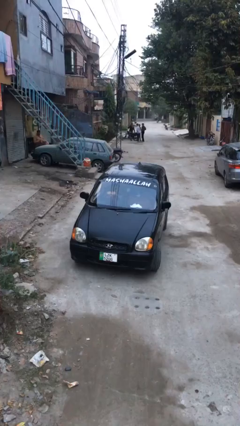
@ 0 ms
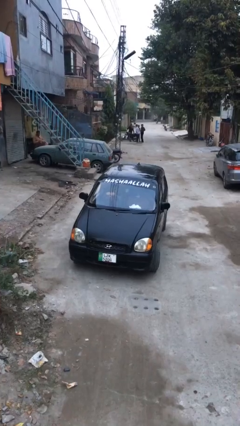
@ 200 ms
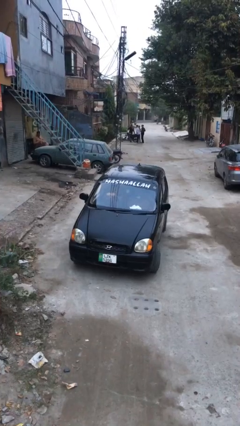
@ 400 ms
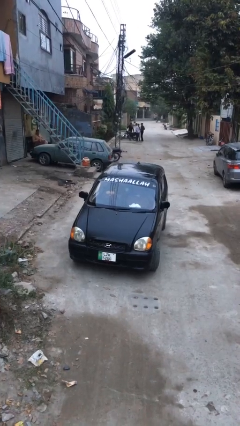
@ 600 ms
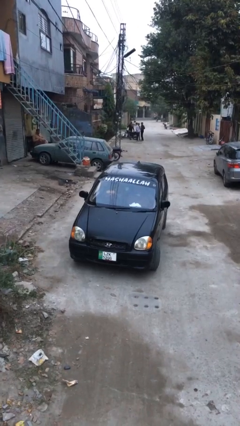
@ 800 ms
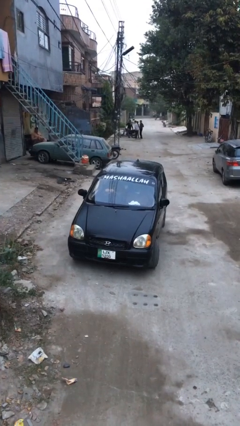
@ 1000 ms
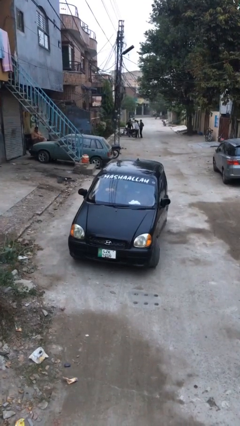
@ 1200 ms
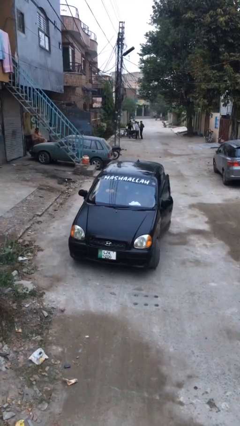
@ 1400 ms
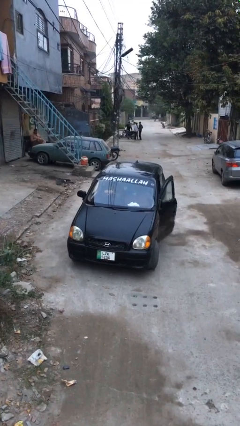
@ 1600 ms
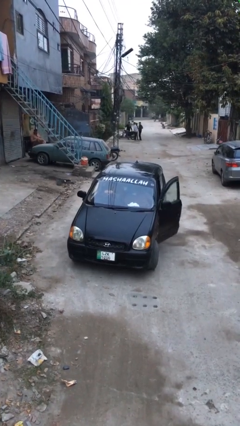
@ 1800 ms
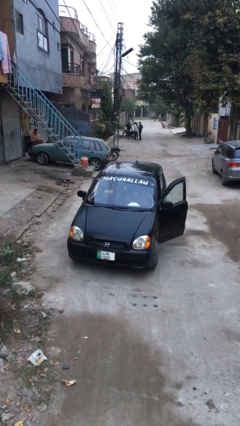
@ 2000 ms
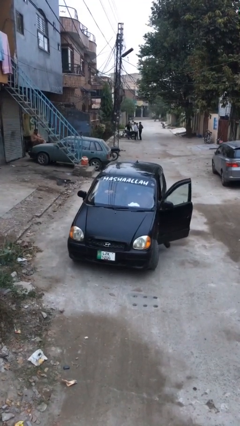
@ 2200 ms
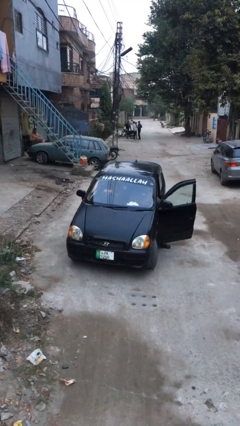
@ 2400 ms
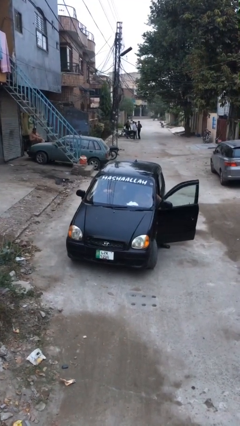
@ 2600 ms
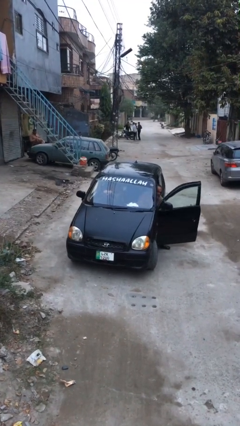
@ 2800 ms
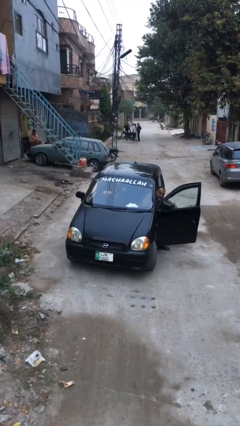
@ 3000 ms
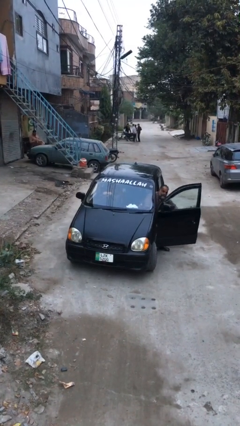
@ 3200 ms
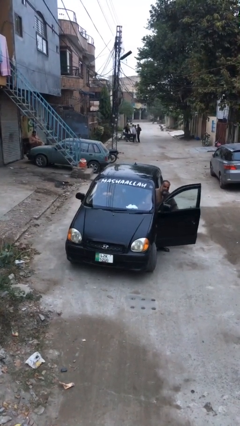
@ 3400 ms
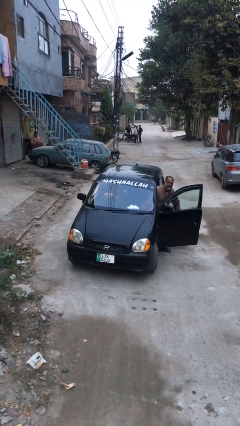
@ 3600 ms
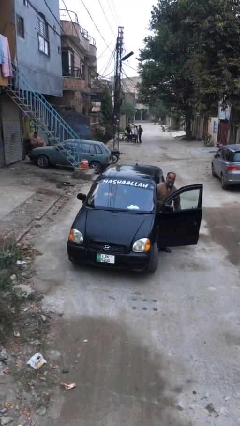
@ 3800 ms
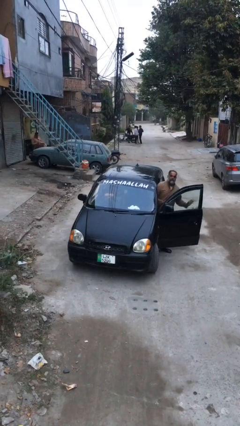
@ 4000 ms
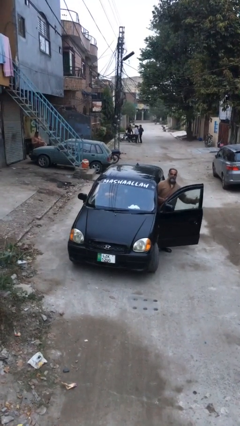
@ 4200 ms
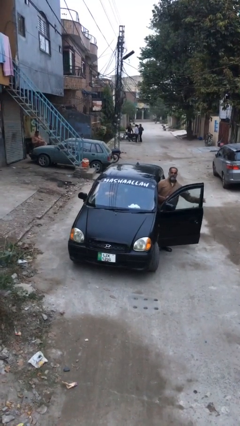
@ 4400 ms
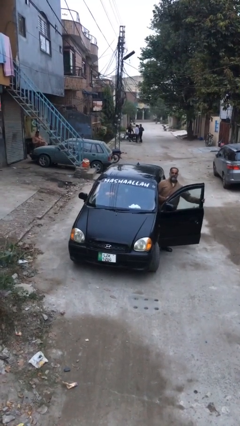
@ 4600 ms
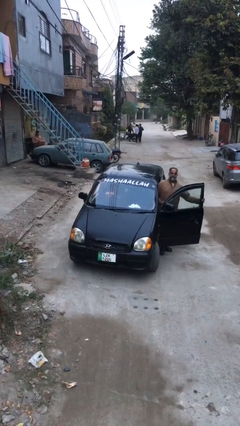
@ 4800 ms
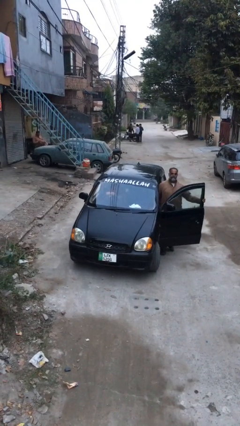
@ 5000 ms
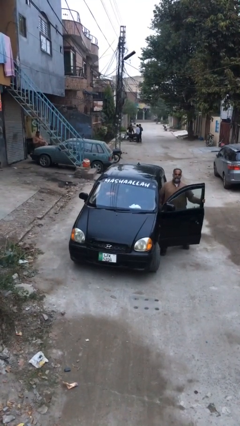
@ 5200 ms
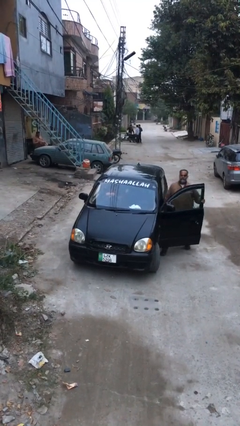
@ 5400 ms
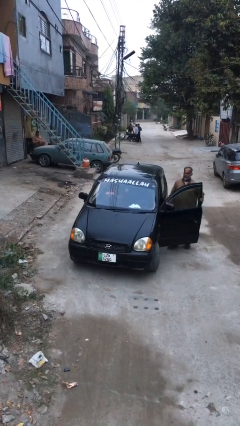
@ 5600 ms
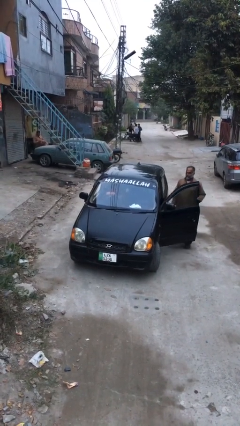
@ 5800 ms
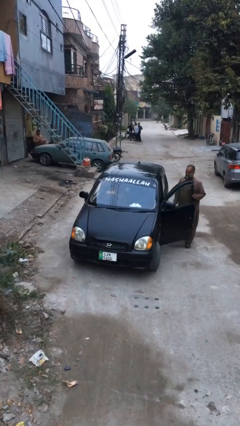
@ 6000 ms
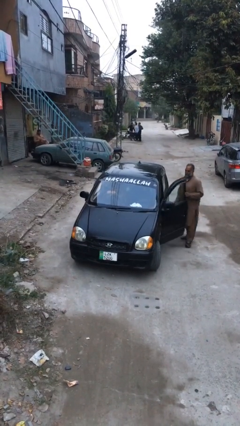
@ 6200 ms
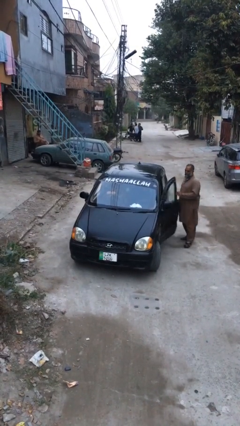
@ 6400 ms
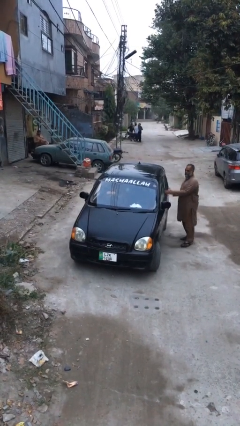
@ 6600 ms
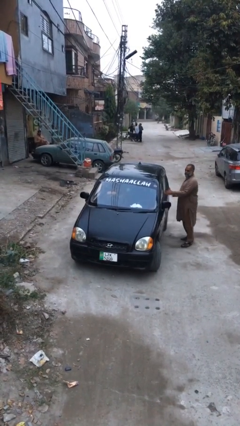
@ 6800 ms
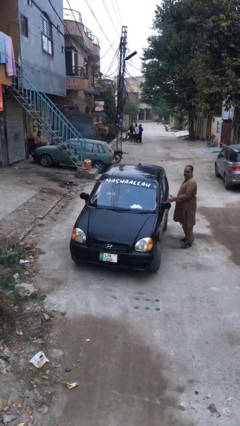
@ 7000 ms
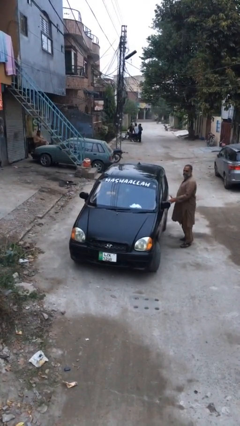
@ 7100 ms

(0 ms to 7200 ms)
car drops off person

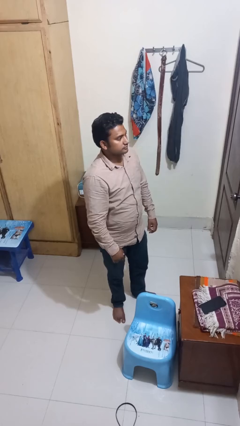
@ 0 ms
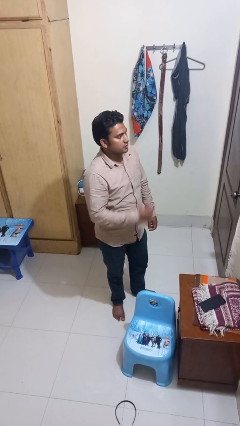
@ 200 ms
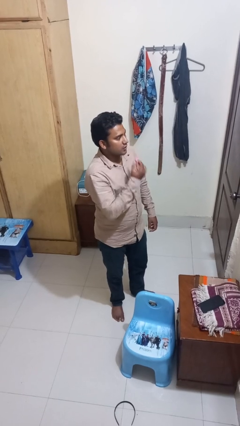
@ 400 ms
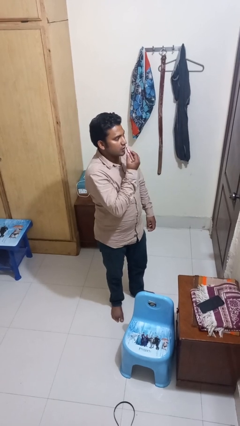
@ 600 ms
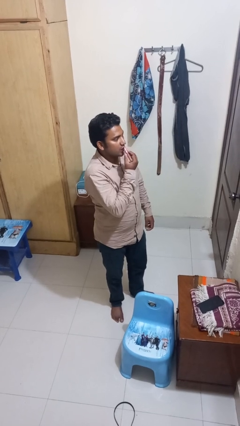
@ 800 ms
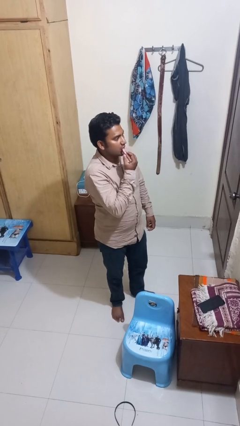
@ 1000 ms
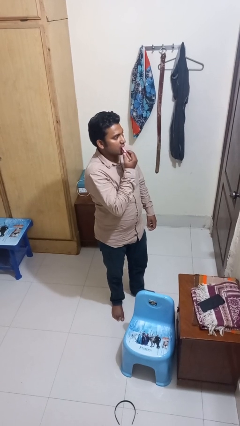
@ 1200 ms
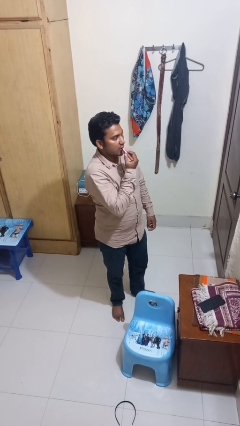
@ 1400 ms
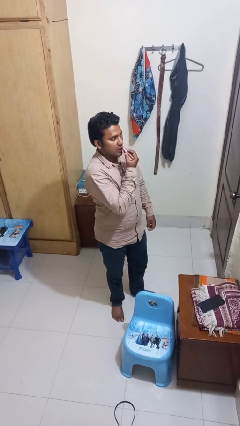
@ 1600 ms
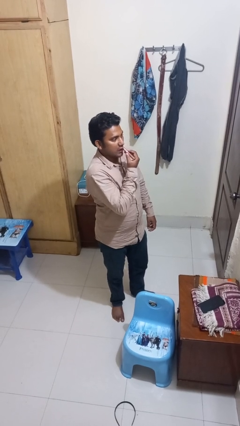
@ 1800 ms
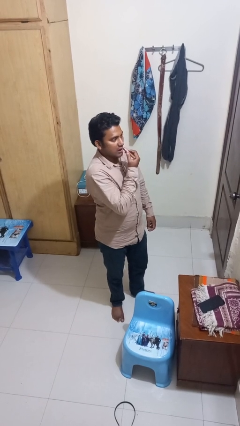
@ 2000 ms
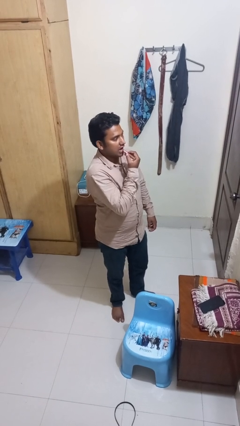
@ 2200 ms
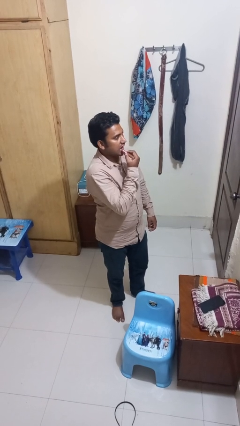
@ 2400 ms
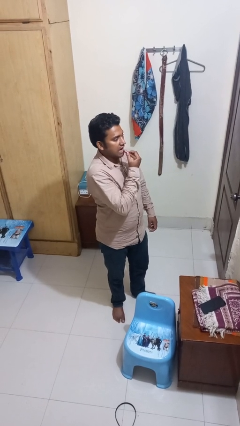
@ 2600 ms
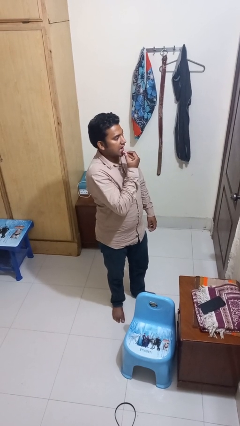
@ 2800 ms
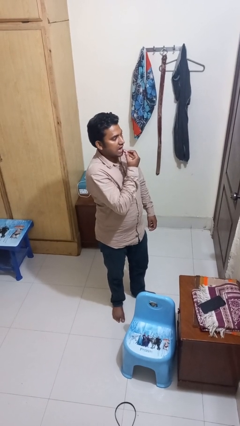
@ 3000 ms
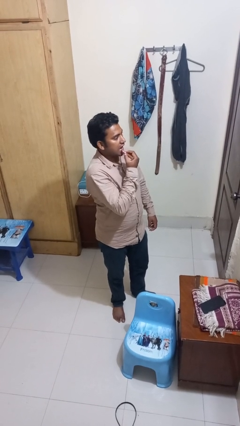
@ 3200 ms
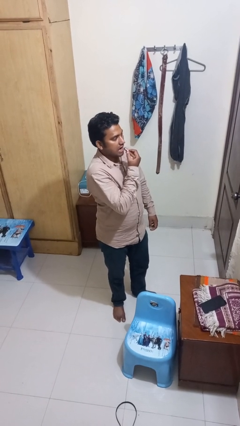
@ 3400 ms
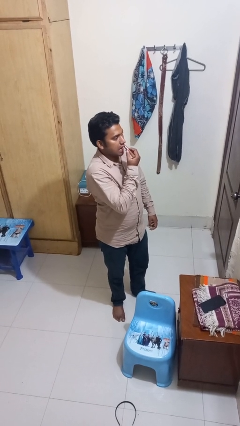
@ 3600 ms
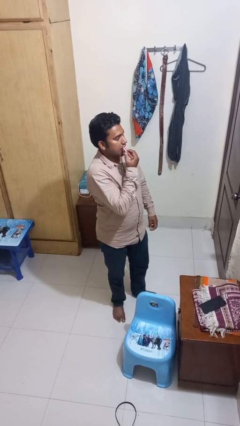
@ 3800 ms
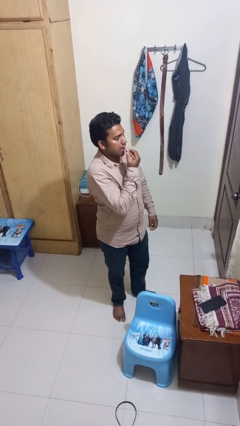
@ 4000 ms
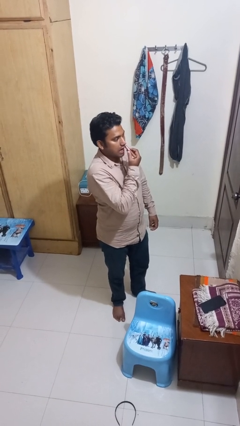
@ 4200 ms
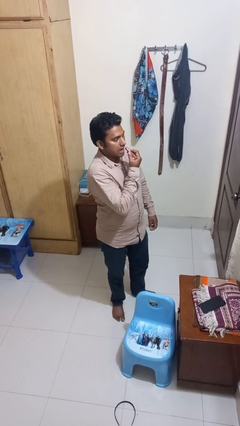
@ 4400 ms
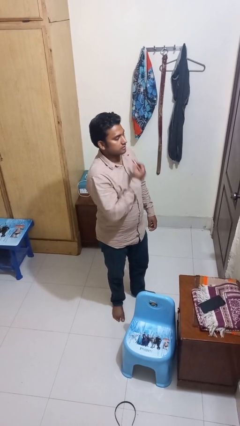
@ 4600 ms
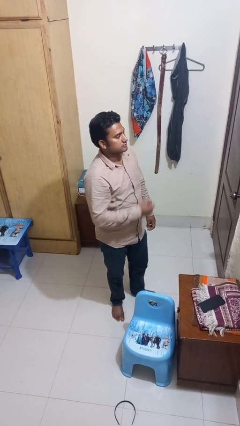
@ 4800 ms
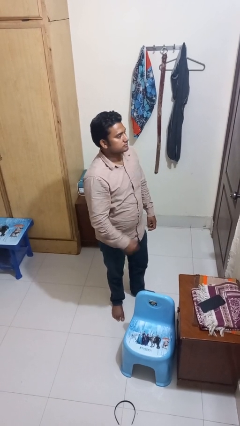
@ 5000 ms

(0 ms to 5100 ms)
person applies lip makeup

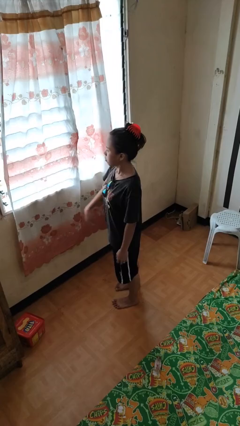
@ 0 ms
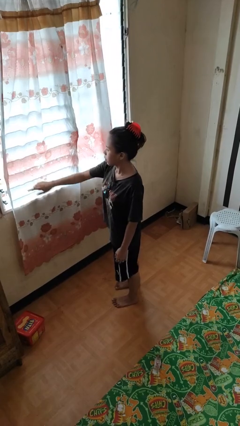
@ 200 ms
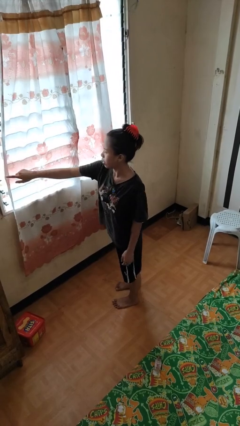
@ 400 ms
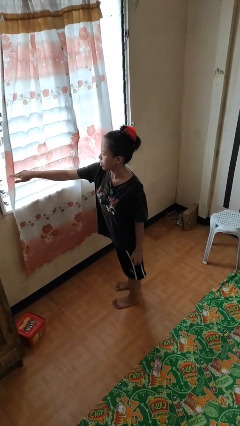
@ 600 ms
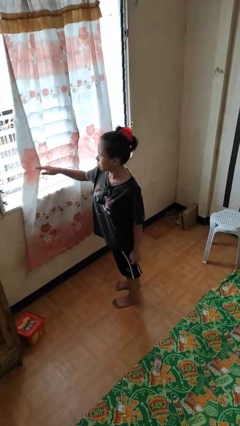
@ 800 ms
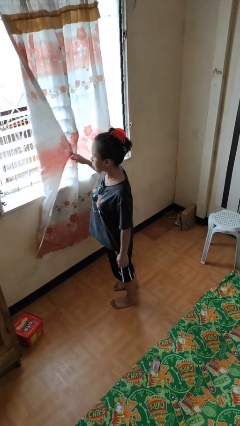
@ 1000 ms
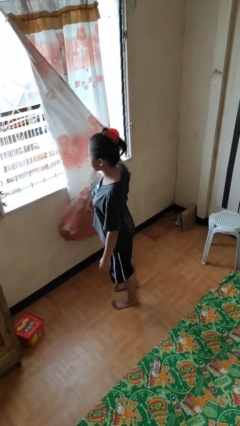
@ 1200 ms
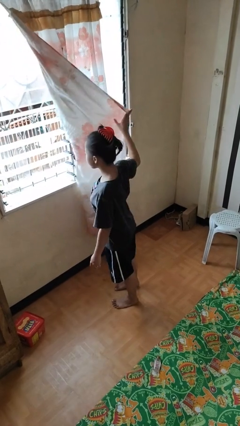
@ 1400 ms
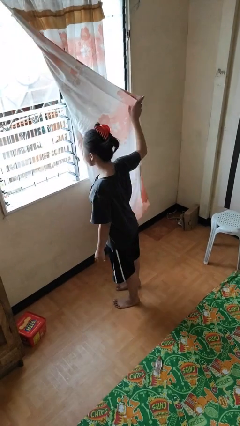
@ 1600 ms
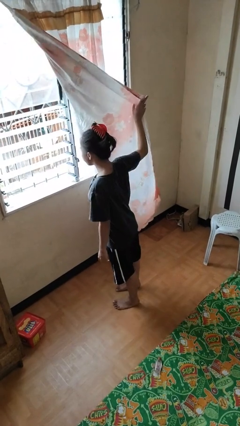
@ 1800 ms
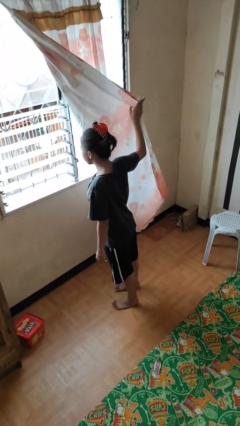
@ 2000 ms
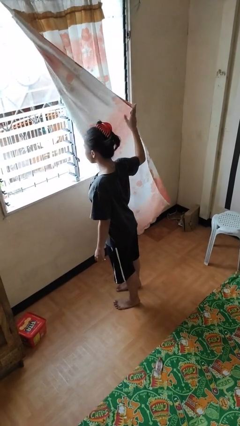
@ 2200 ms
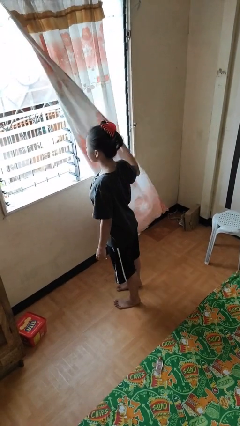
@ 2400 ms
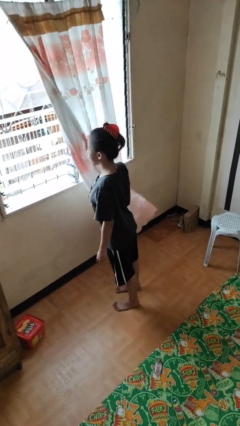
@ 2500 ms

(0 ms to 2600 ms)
person opens curtains

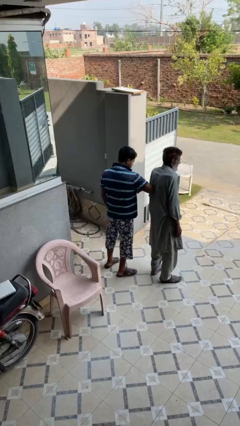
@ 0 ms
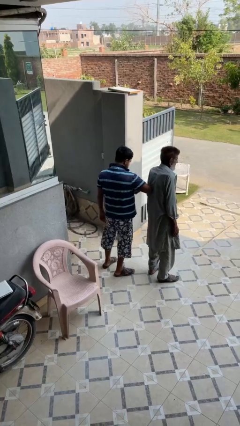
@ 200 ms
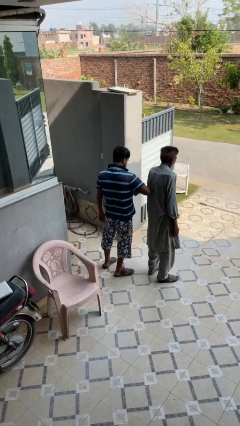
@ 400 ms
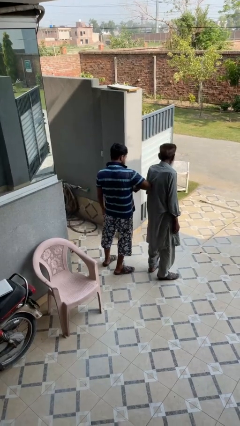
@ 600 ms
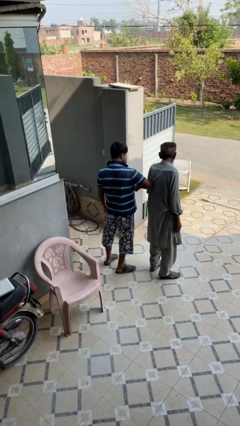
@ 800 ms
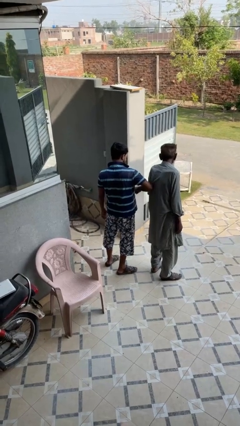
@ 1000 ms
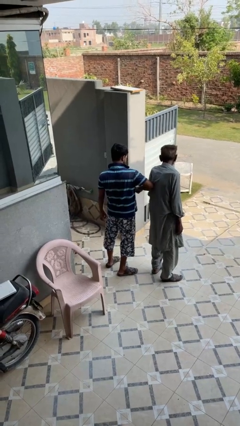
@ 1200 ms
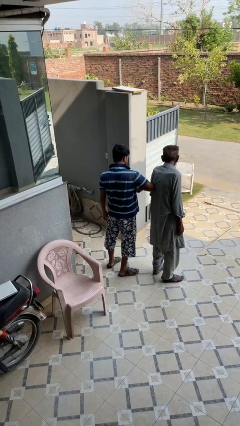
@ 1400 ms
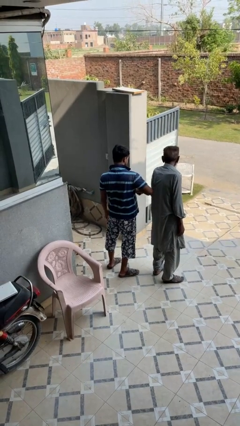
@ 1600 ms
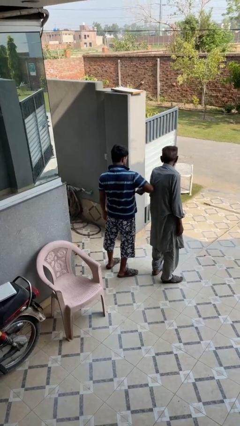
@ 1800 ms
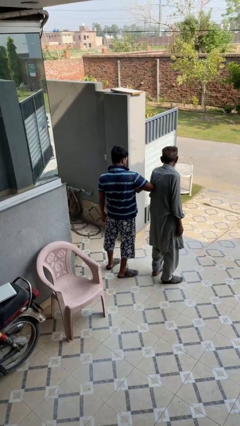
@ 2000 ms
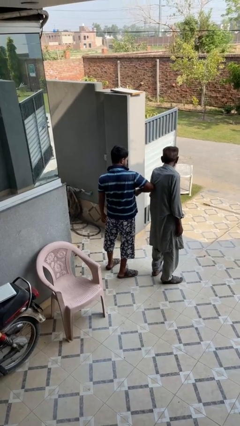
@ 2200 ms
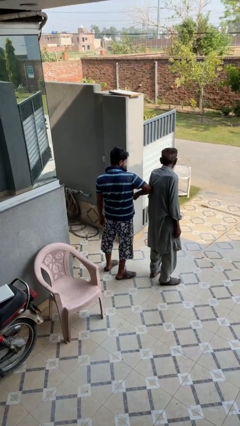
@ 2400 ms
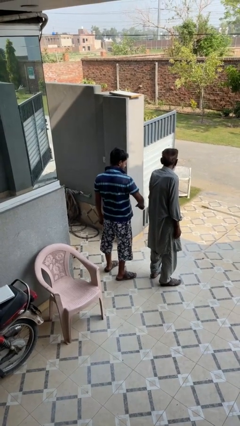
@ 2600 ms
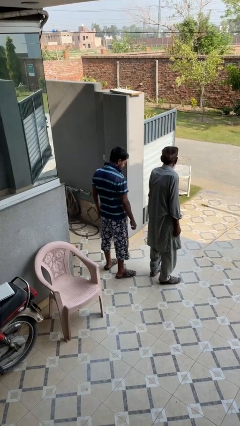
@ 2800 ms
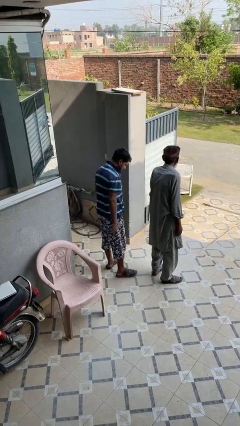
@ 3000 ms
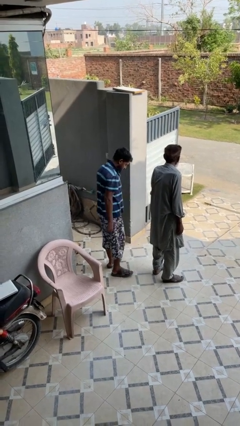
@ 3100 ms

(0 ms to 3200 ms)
person nudges person with elbow
